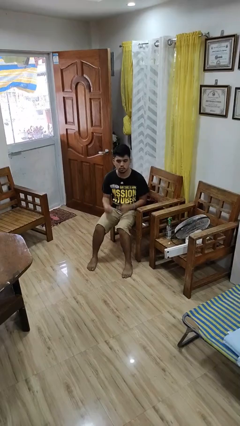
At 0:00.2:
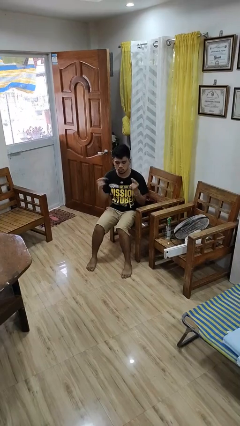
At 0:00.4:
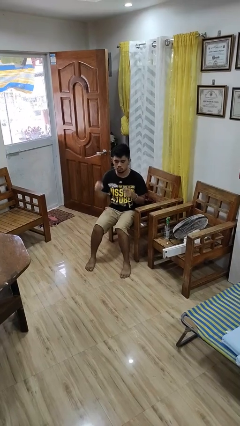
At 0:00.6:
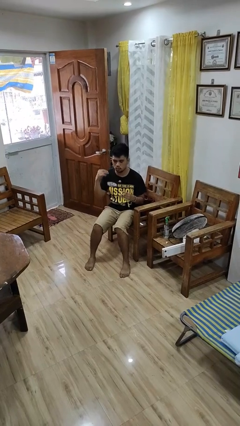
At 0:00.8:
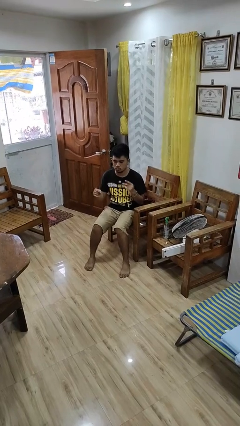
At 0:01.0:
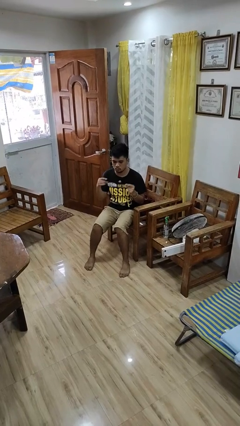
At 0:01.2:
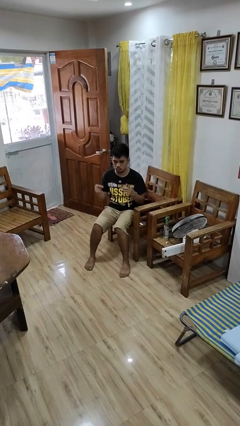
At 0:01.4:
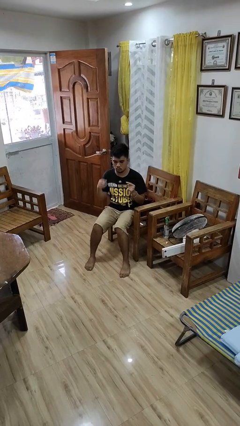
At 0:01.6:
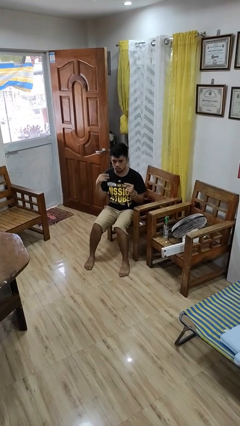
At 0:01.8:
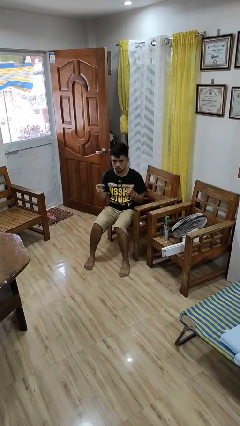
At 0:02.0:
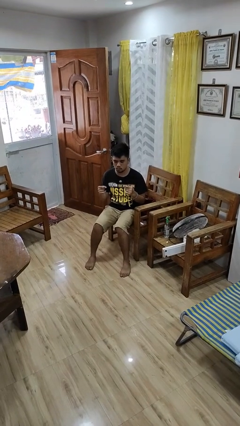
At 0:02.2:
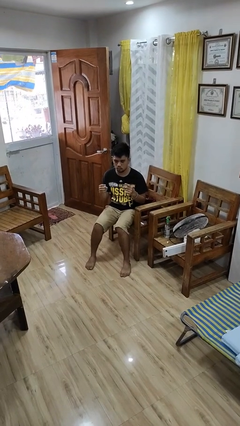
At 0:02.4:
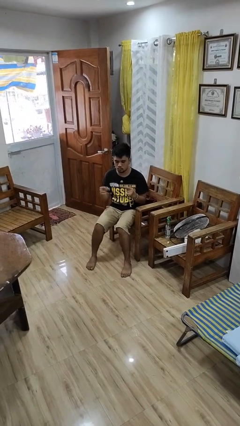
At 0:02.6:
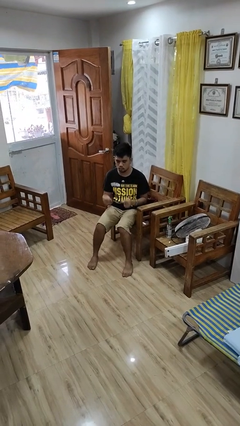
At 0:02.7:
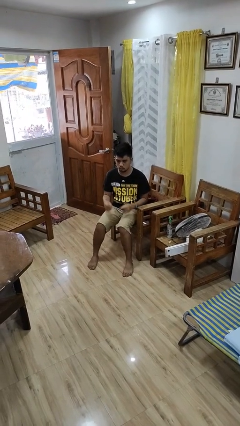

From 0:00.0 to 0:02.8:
person snaps fingers

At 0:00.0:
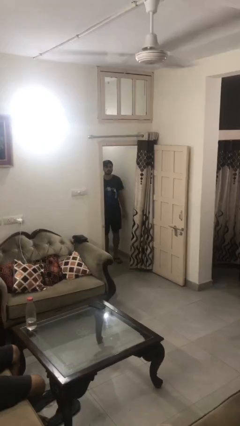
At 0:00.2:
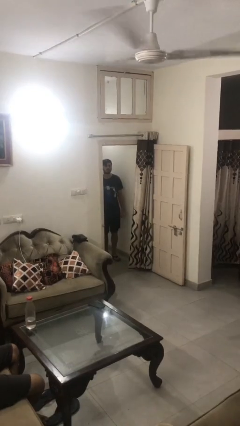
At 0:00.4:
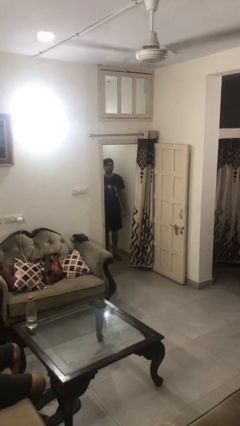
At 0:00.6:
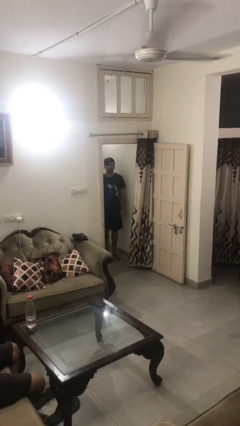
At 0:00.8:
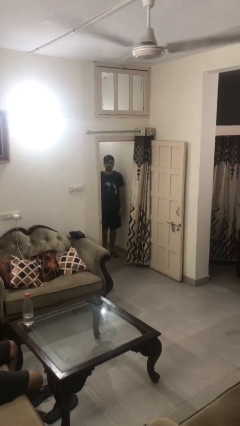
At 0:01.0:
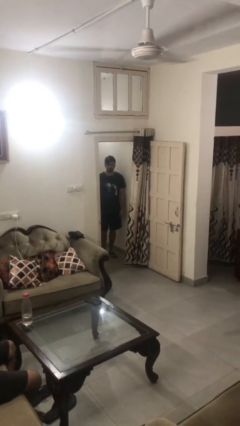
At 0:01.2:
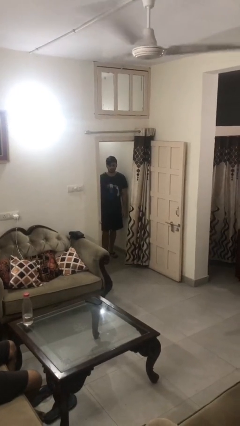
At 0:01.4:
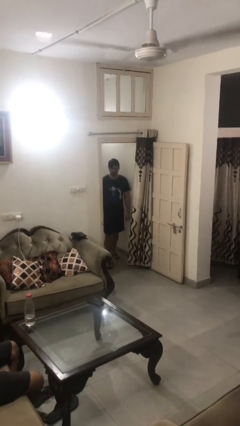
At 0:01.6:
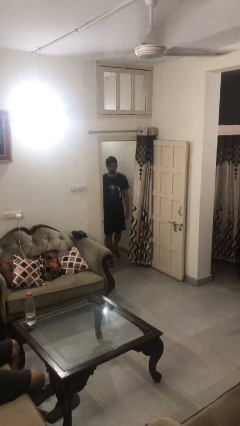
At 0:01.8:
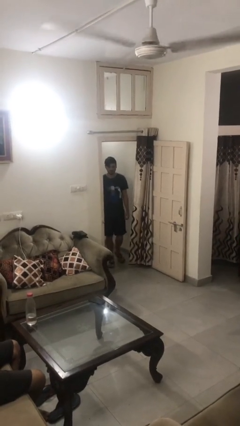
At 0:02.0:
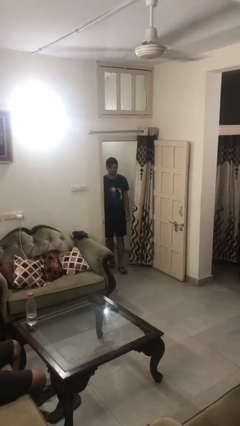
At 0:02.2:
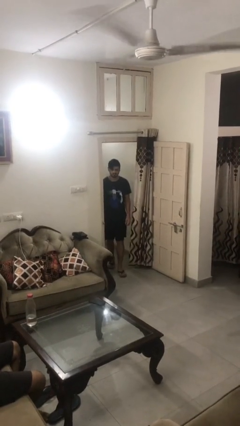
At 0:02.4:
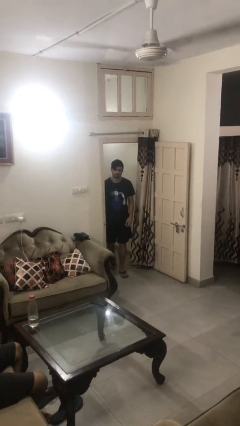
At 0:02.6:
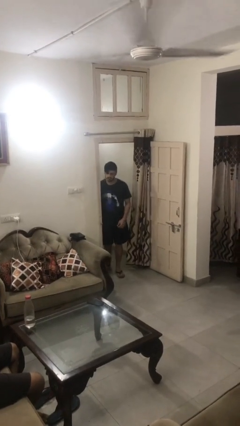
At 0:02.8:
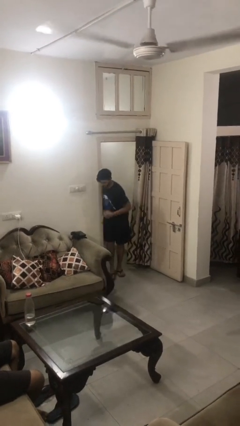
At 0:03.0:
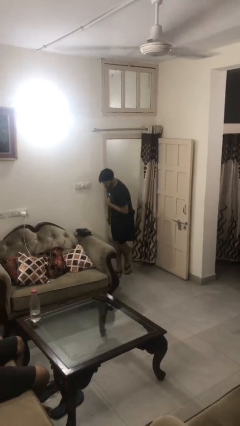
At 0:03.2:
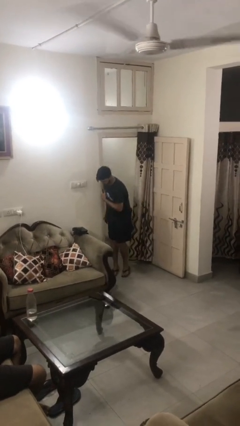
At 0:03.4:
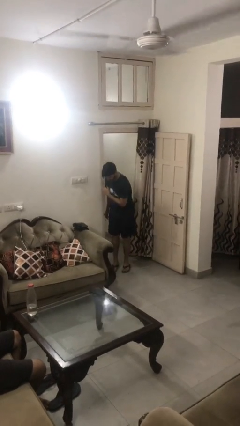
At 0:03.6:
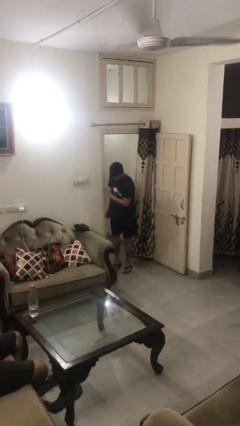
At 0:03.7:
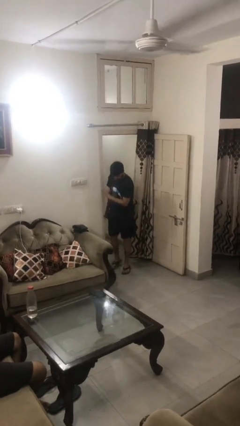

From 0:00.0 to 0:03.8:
person bumps into wall

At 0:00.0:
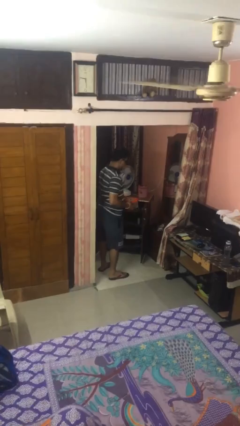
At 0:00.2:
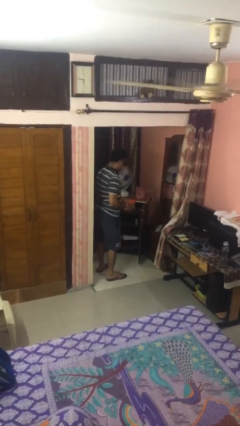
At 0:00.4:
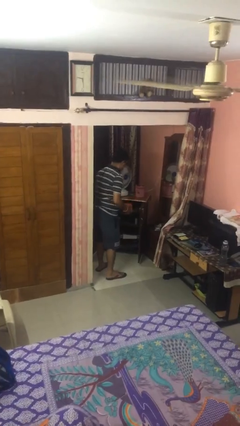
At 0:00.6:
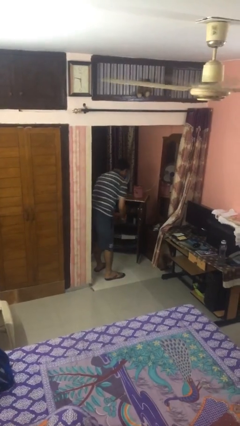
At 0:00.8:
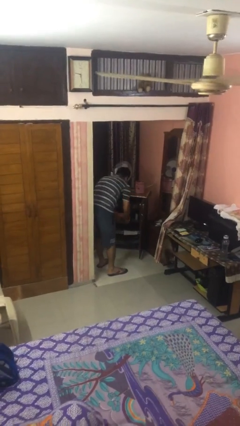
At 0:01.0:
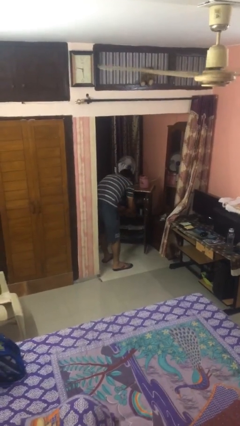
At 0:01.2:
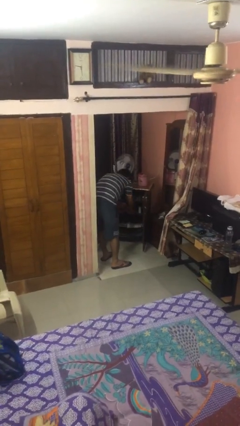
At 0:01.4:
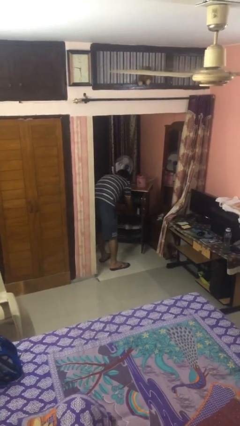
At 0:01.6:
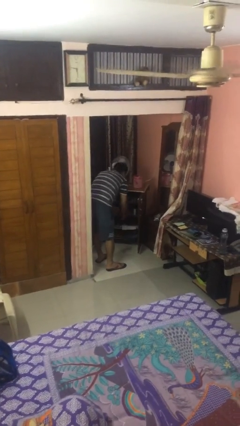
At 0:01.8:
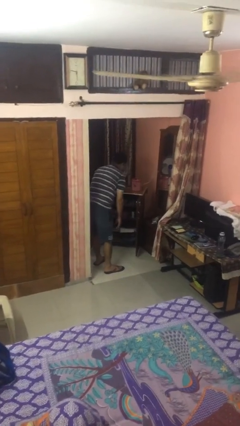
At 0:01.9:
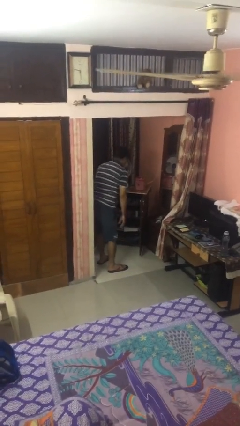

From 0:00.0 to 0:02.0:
person puts down object into cabinet

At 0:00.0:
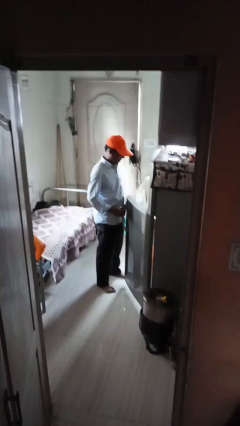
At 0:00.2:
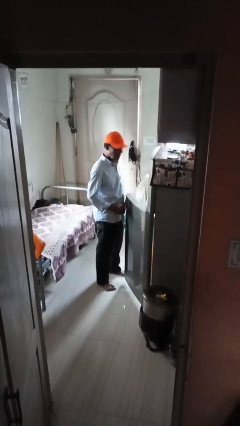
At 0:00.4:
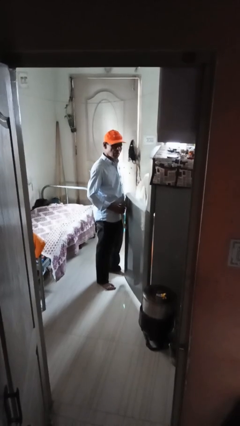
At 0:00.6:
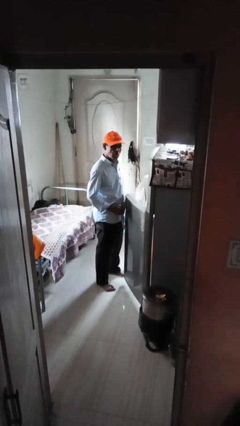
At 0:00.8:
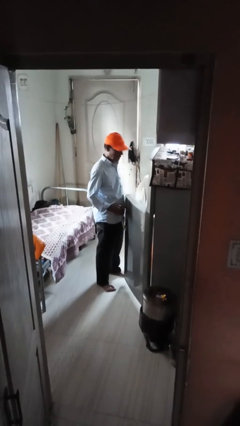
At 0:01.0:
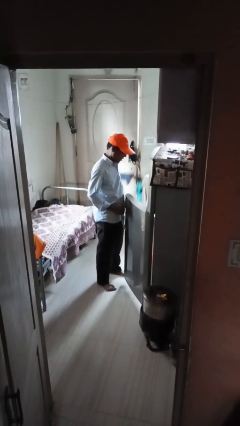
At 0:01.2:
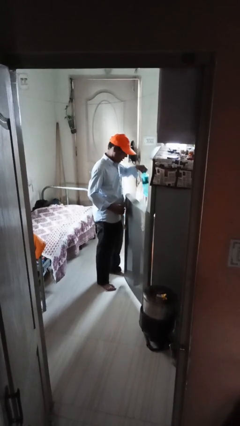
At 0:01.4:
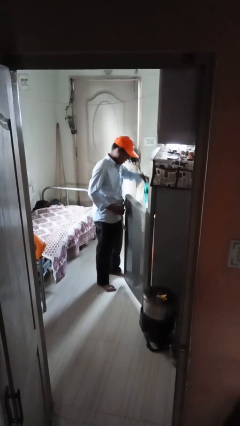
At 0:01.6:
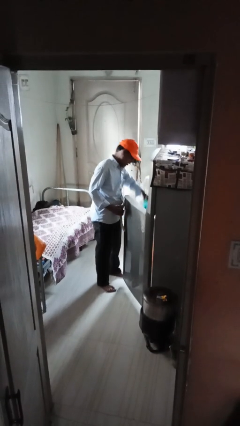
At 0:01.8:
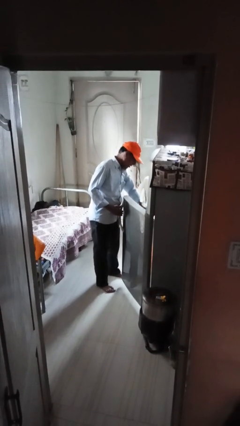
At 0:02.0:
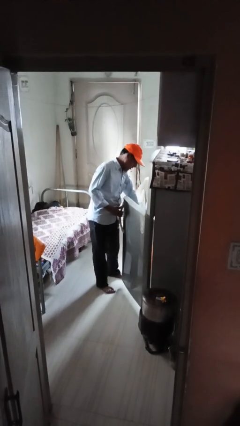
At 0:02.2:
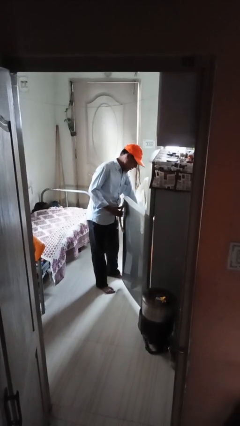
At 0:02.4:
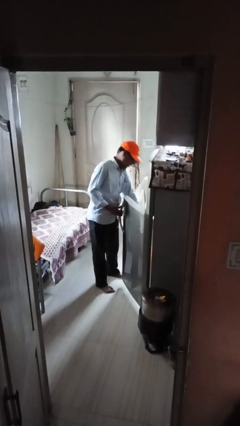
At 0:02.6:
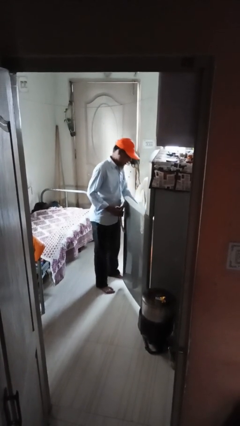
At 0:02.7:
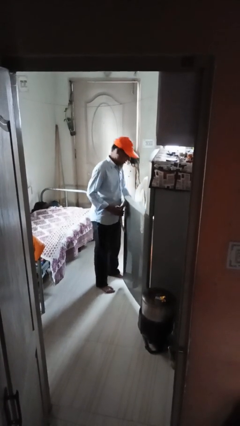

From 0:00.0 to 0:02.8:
person puts object into refrigerator

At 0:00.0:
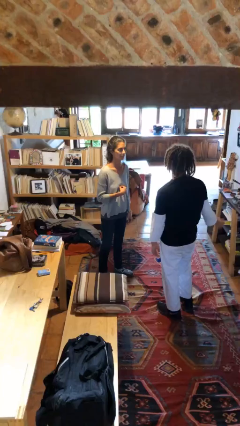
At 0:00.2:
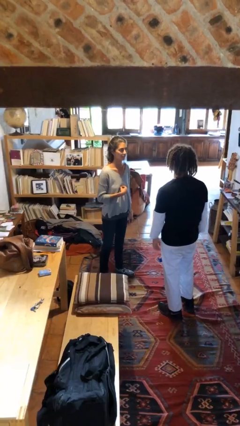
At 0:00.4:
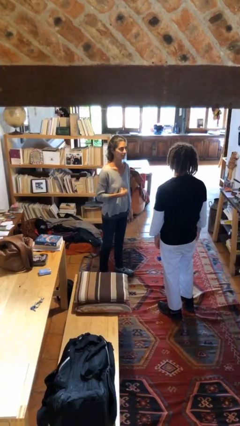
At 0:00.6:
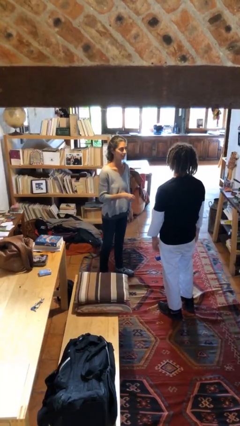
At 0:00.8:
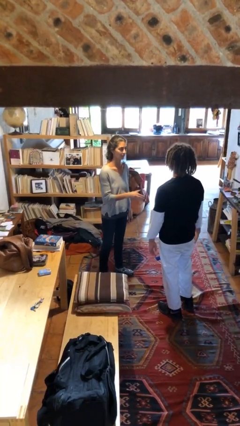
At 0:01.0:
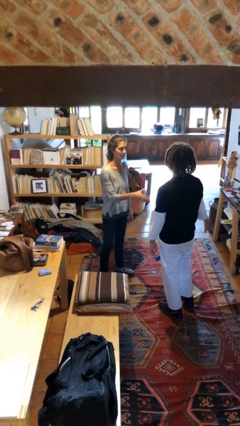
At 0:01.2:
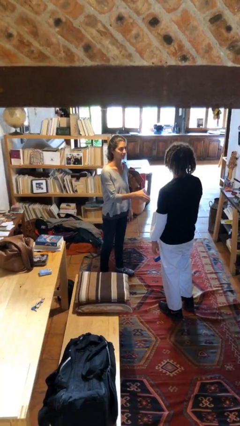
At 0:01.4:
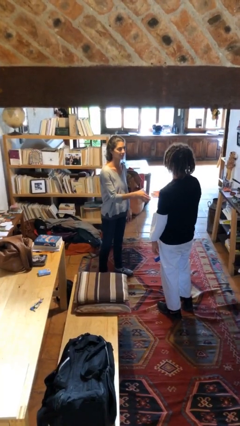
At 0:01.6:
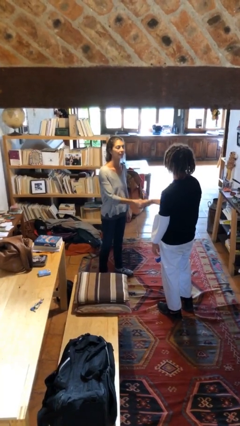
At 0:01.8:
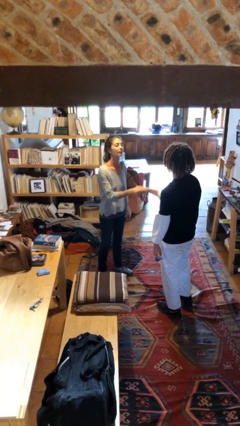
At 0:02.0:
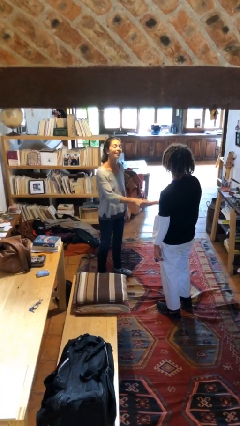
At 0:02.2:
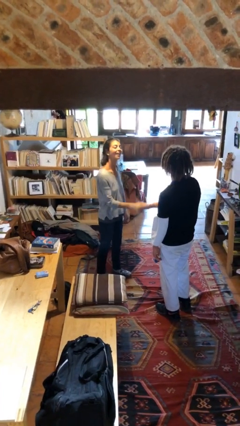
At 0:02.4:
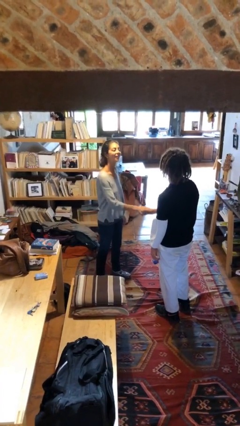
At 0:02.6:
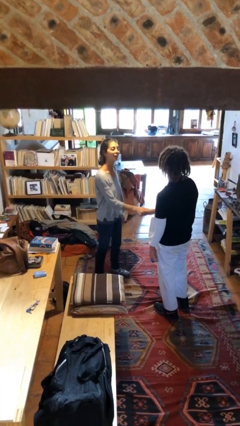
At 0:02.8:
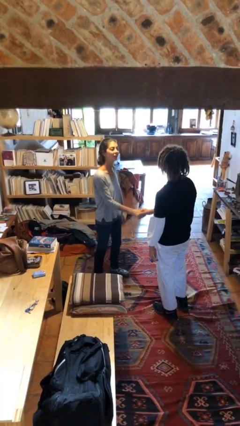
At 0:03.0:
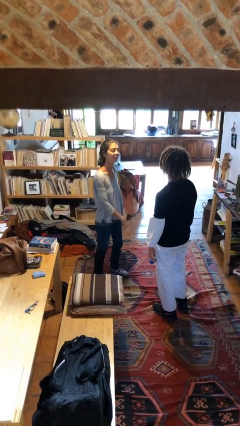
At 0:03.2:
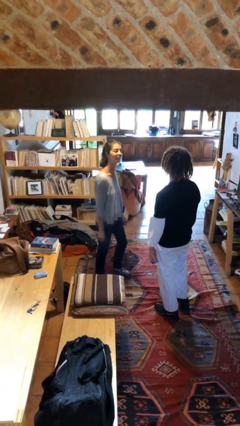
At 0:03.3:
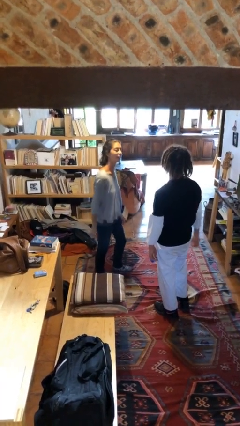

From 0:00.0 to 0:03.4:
person shakes hand

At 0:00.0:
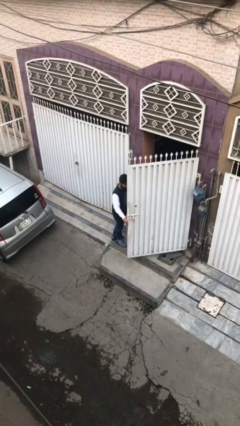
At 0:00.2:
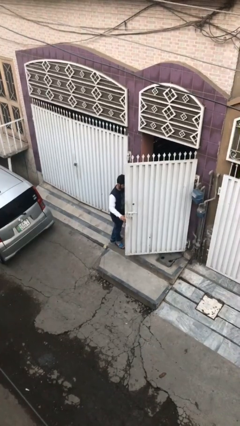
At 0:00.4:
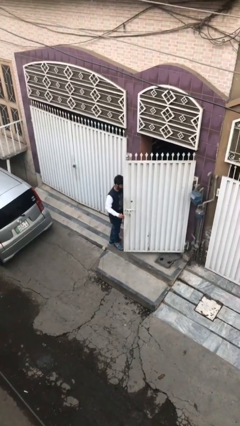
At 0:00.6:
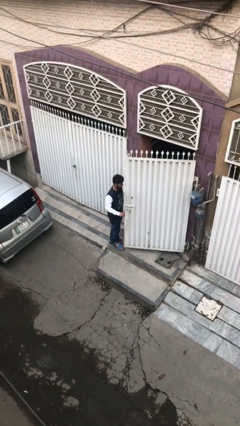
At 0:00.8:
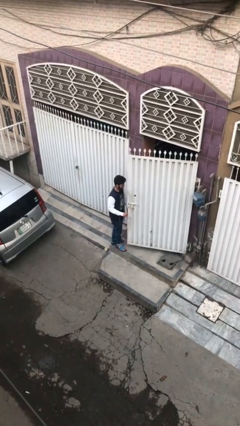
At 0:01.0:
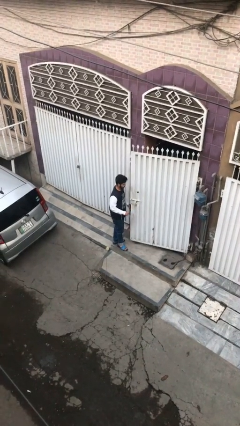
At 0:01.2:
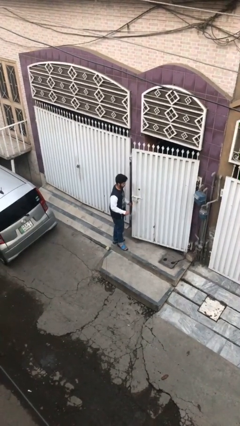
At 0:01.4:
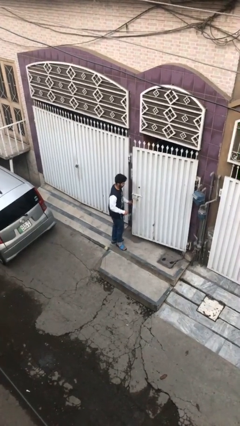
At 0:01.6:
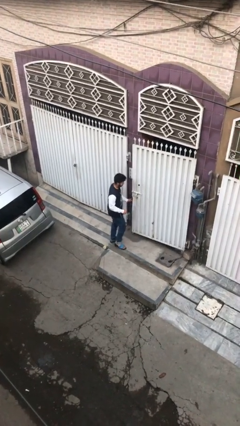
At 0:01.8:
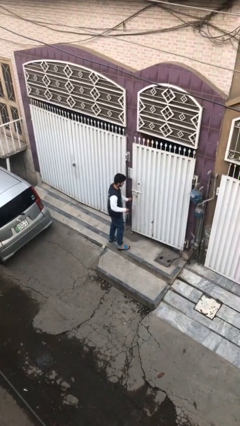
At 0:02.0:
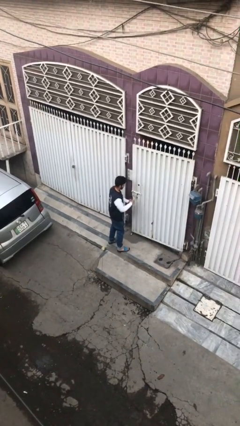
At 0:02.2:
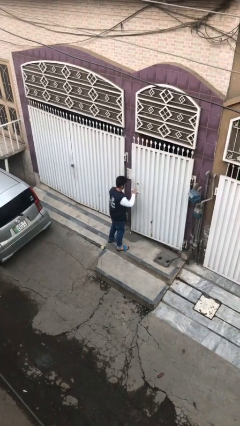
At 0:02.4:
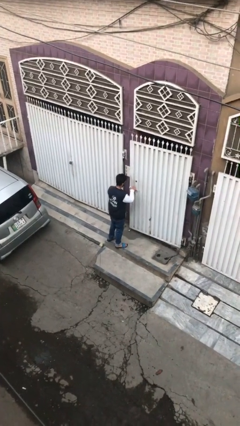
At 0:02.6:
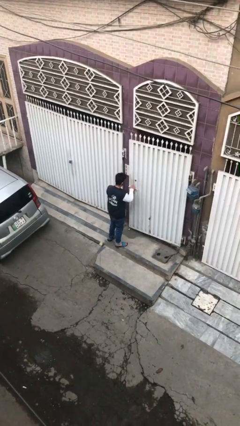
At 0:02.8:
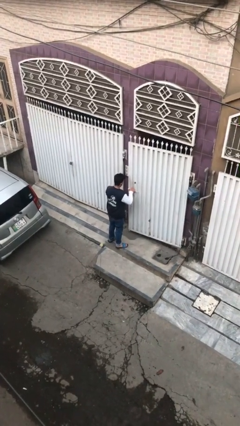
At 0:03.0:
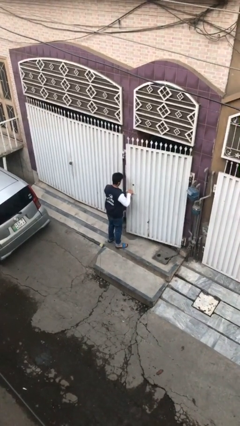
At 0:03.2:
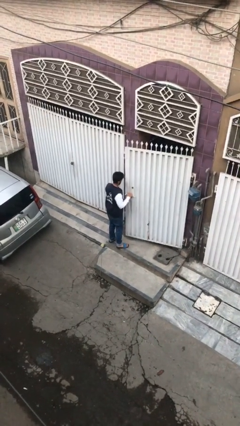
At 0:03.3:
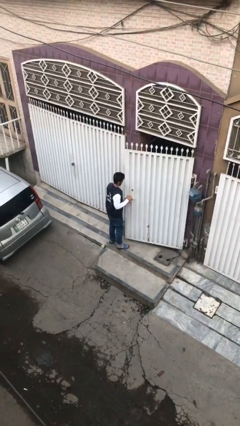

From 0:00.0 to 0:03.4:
person closes facility door
